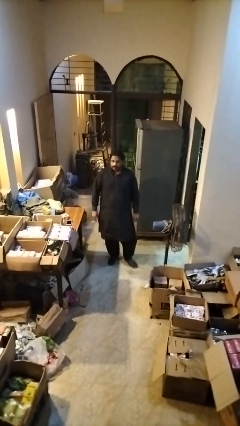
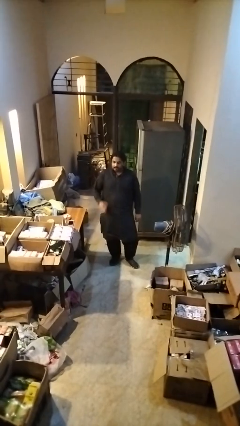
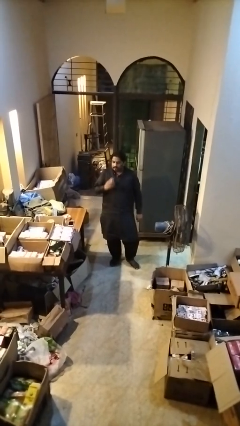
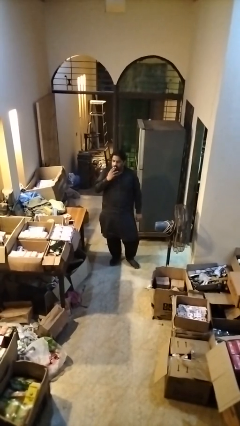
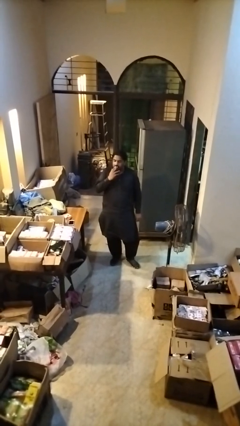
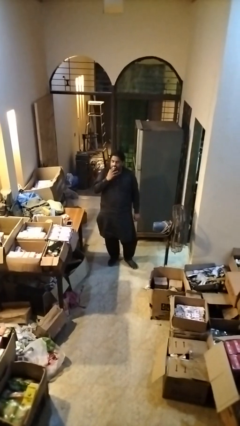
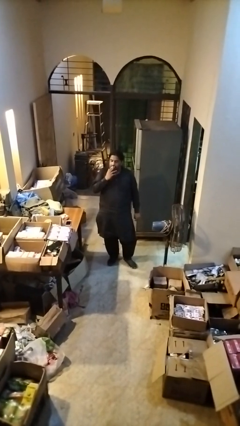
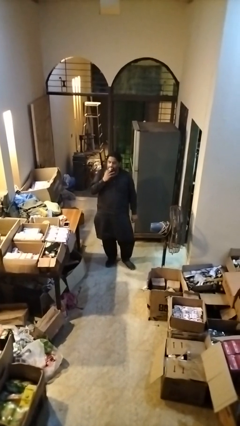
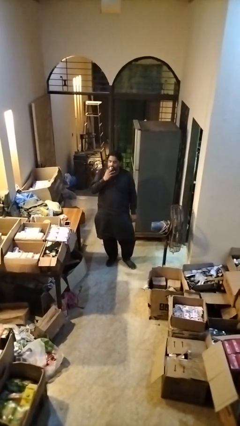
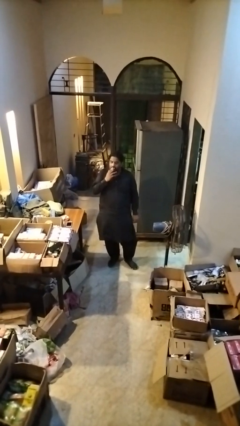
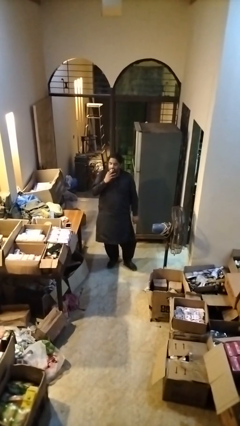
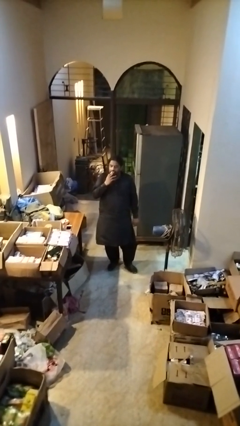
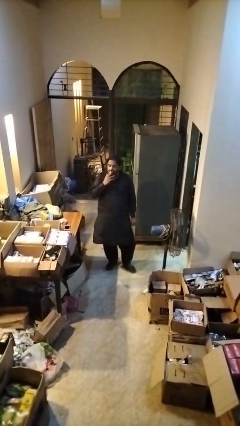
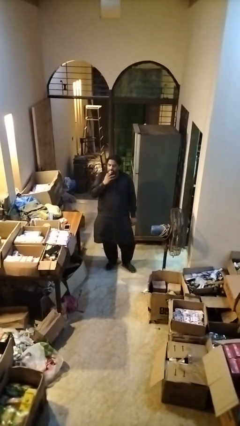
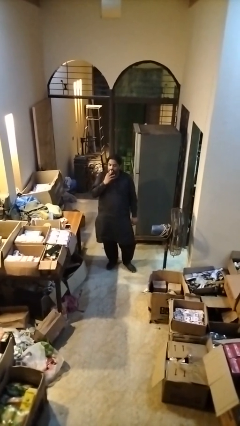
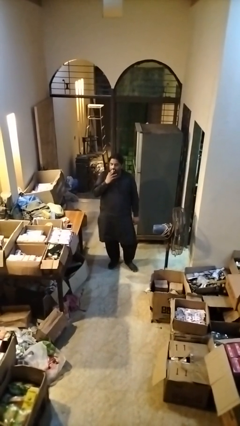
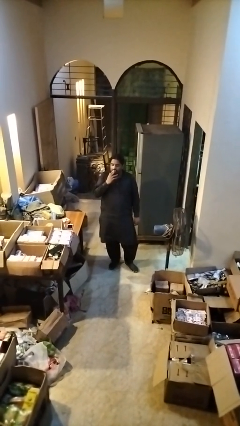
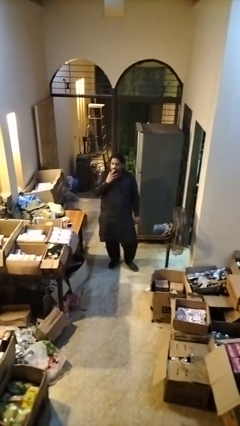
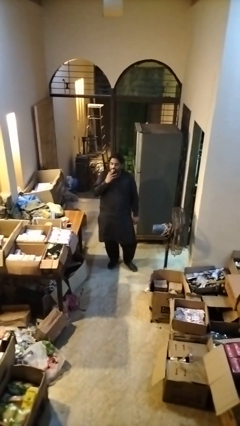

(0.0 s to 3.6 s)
person vapes

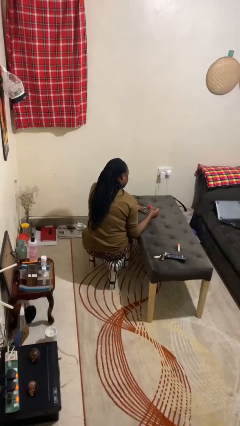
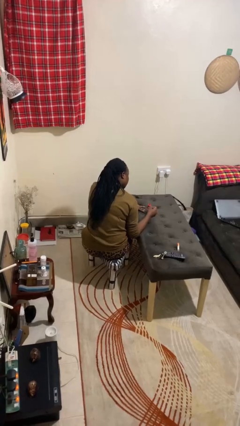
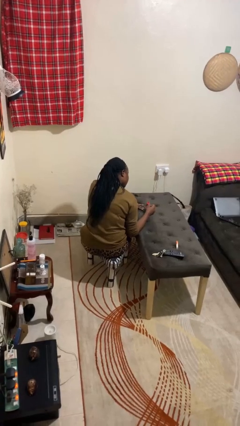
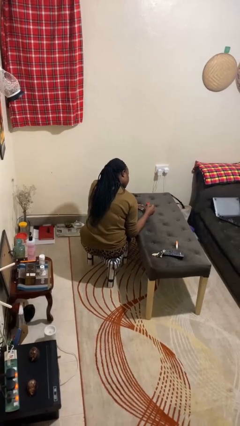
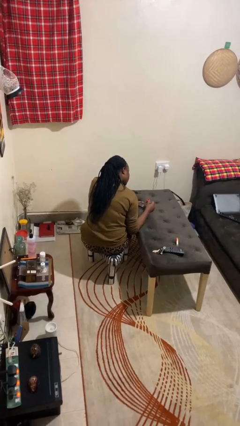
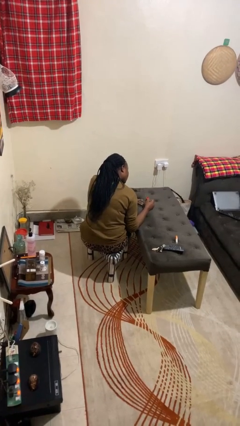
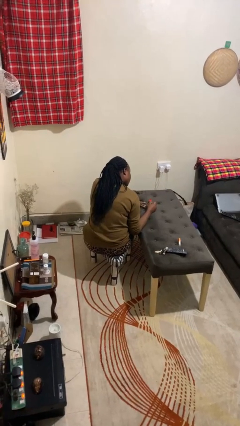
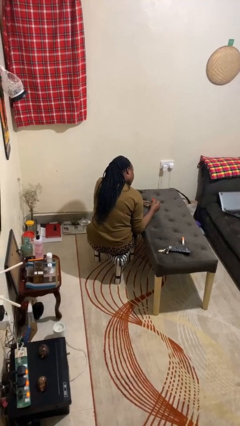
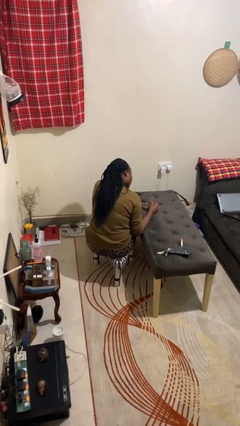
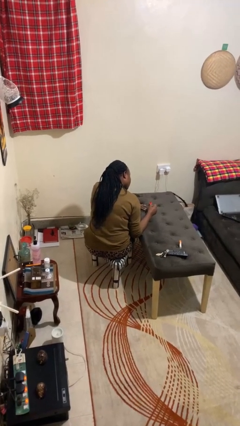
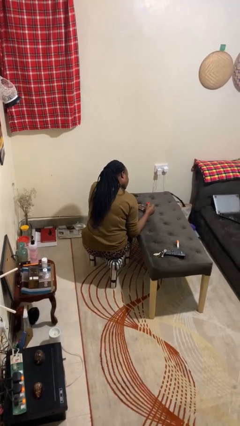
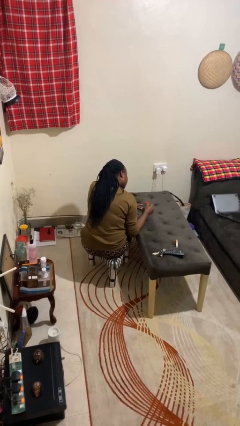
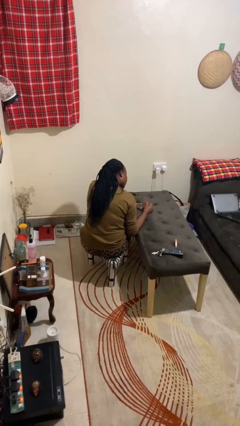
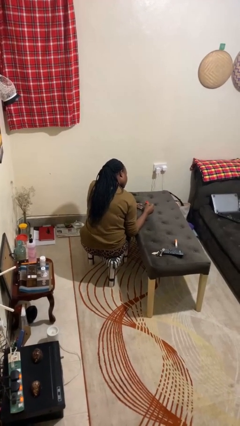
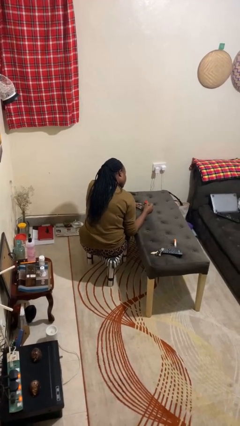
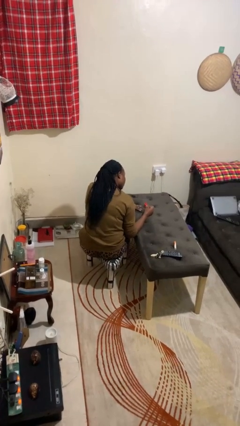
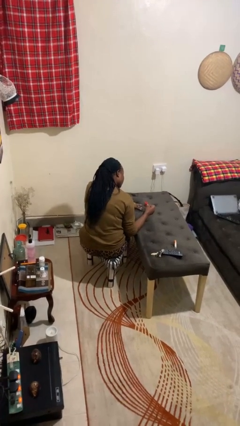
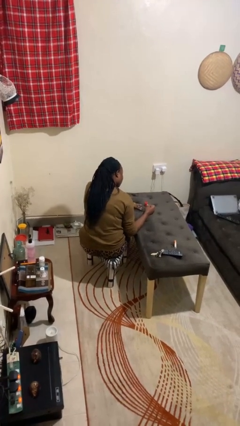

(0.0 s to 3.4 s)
person paints fingernails

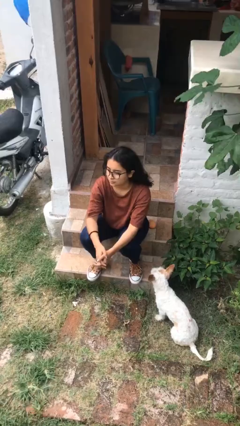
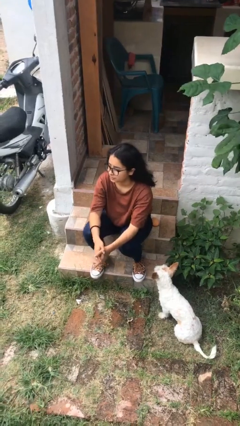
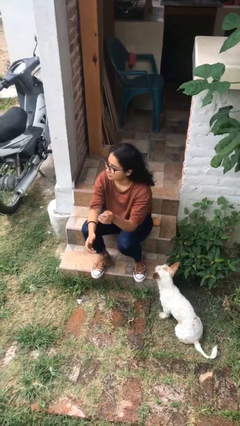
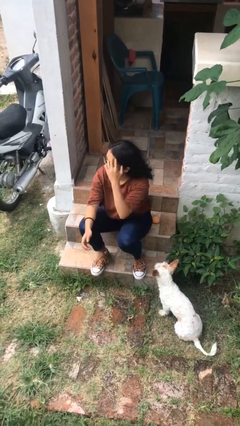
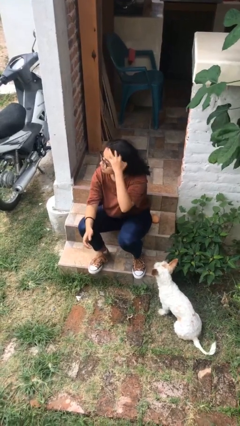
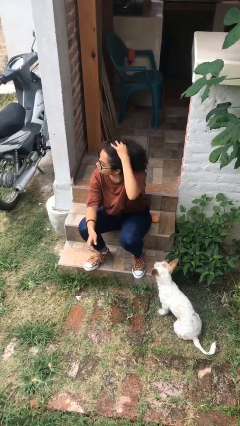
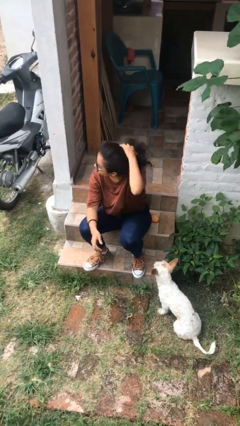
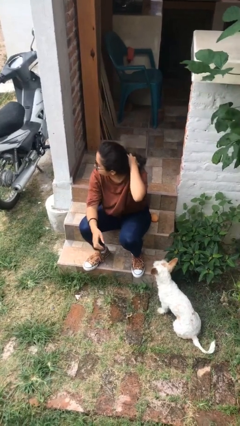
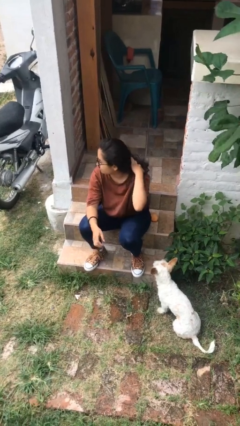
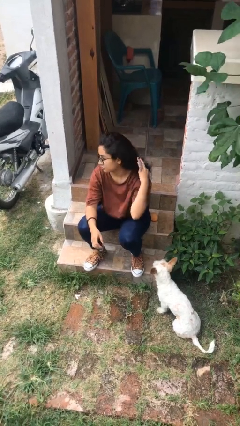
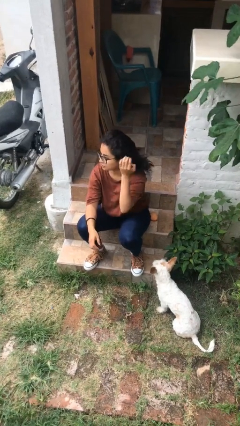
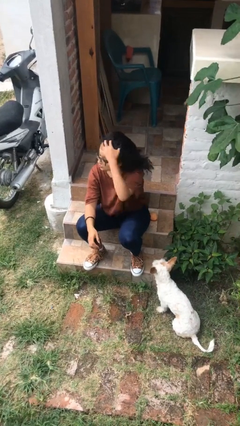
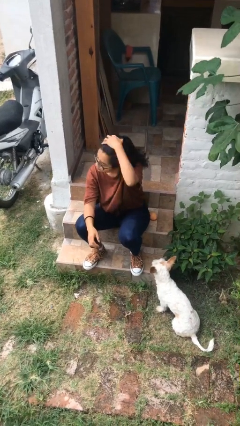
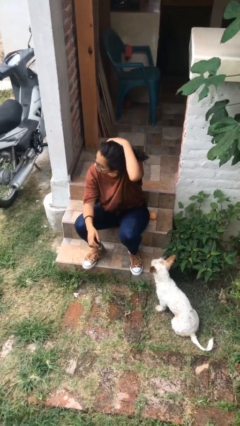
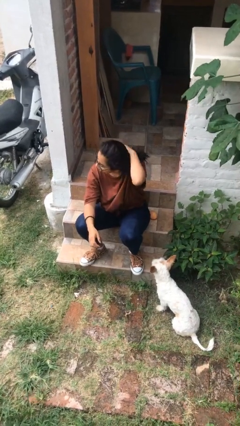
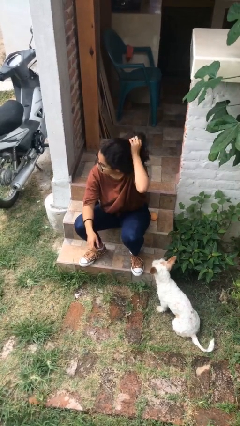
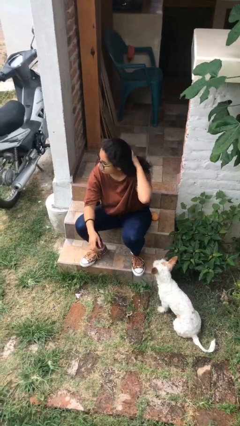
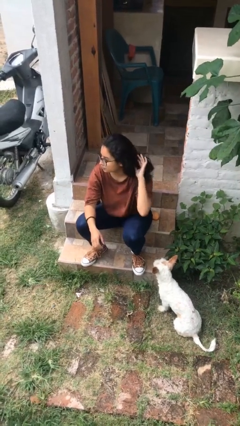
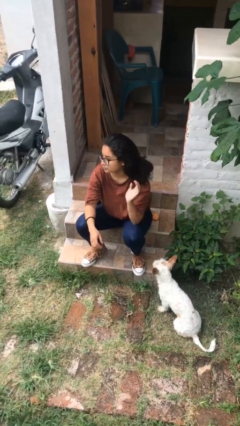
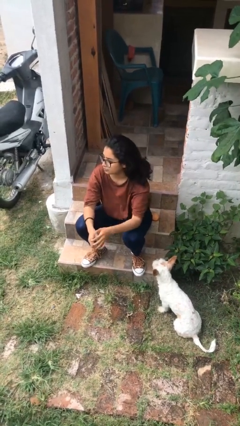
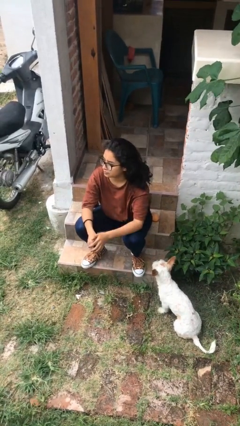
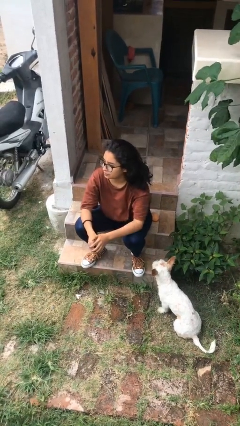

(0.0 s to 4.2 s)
person strokes hair

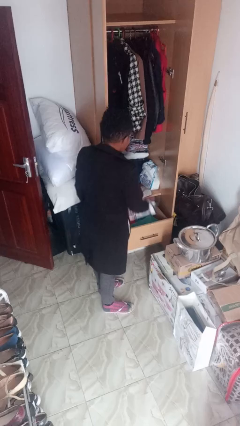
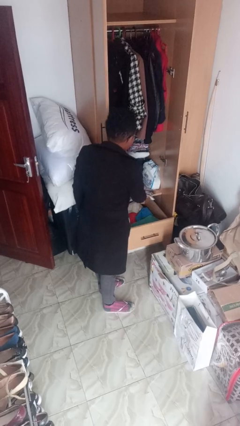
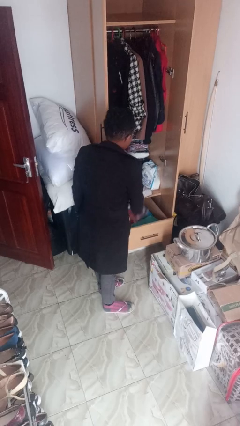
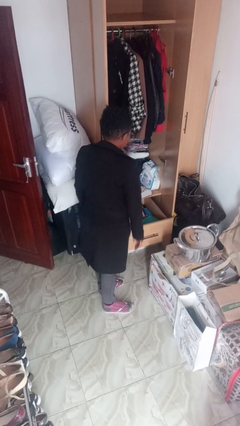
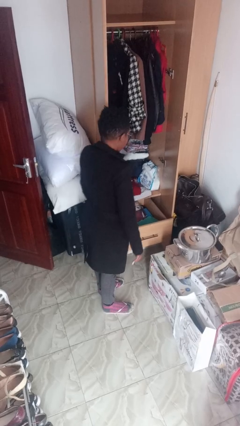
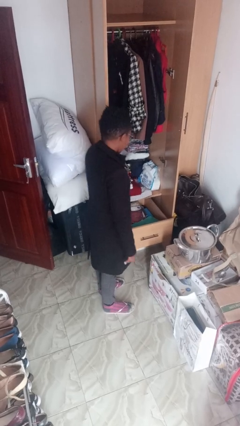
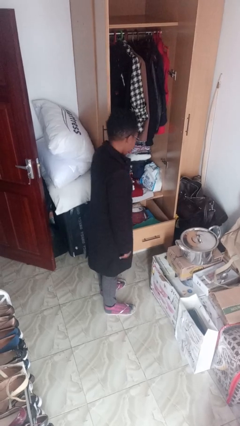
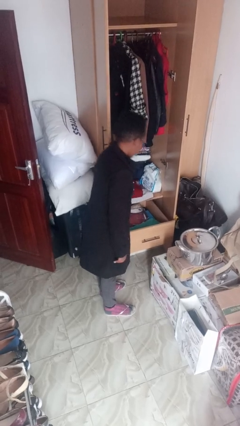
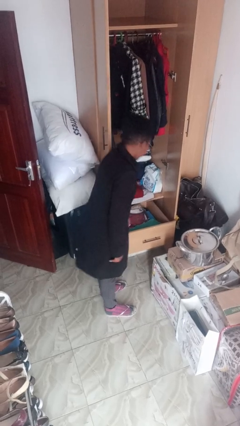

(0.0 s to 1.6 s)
person puts clothes into dresser

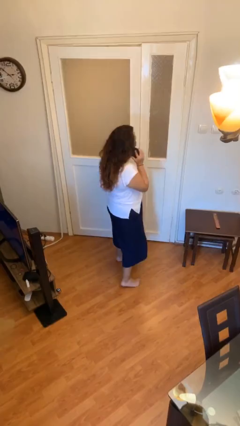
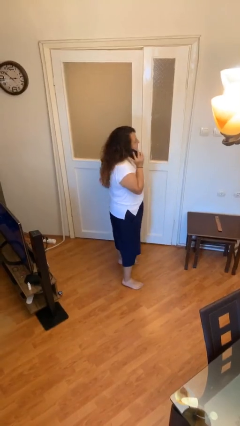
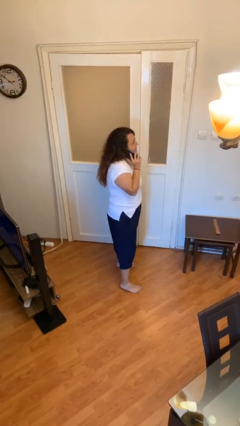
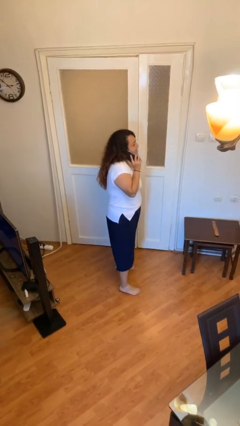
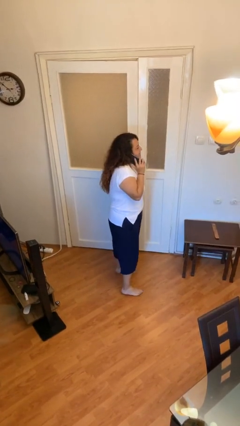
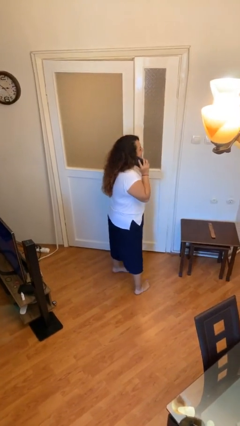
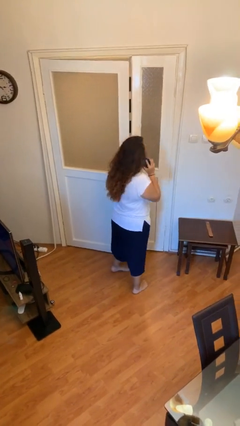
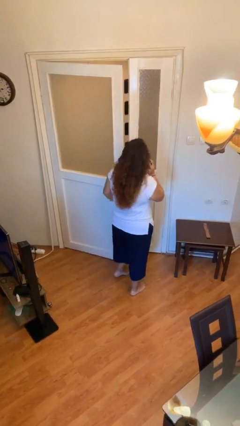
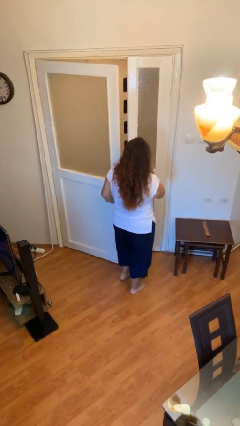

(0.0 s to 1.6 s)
person opens facility door

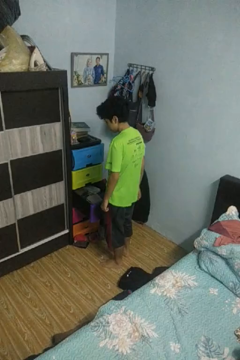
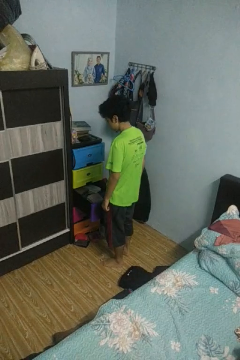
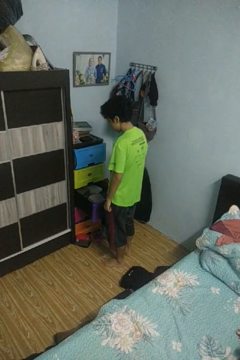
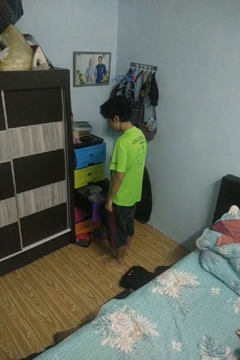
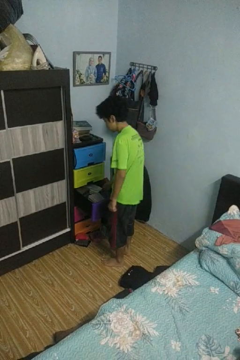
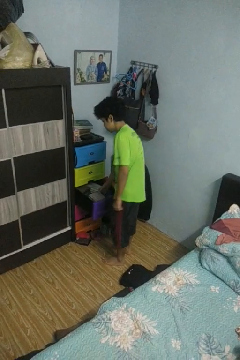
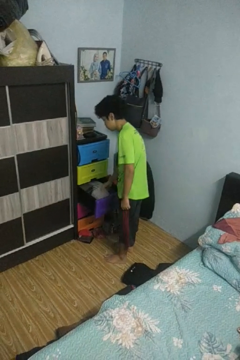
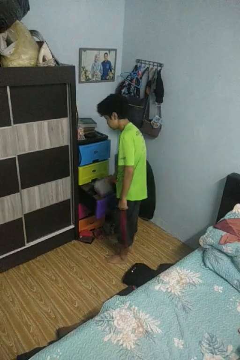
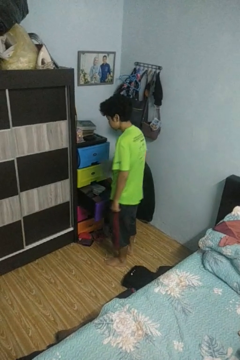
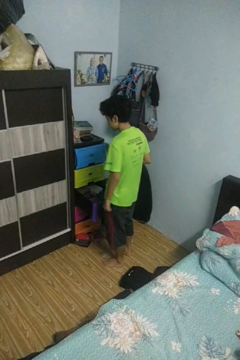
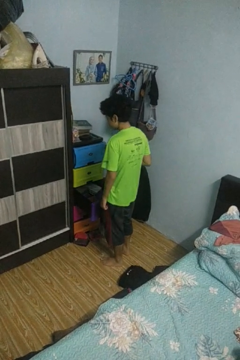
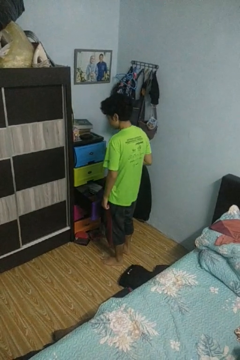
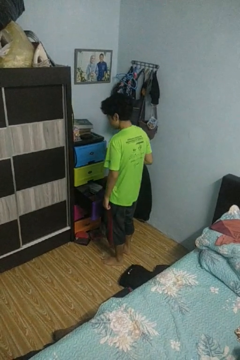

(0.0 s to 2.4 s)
person takes clothes from dresser

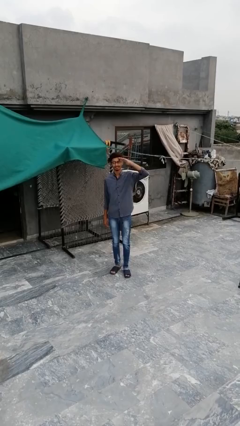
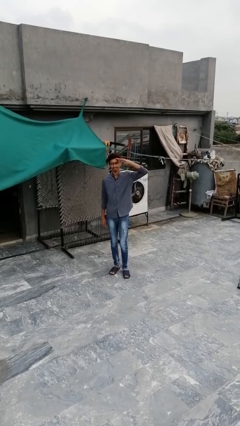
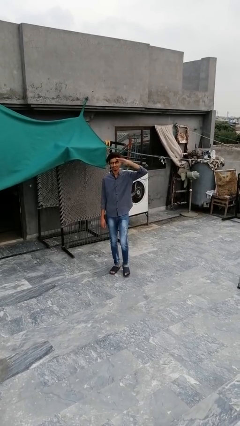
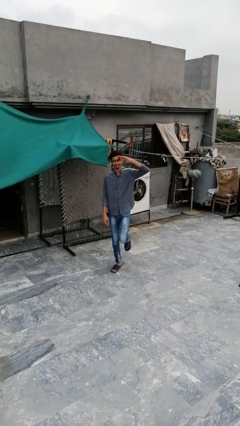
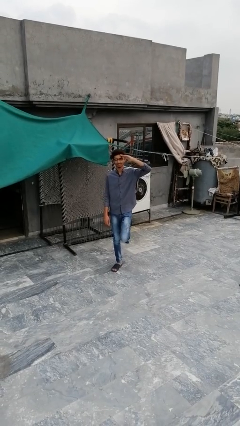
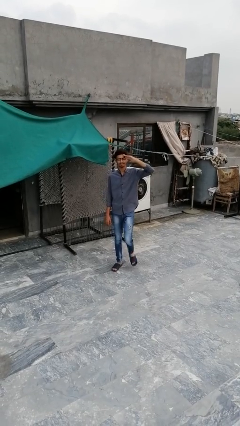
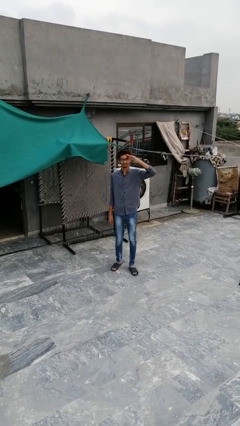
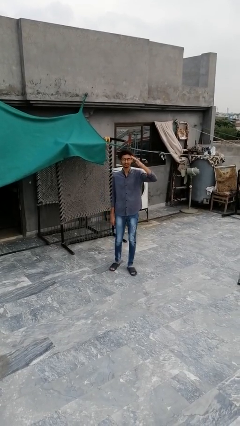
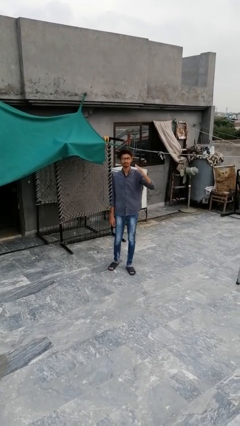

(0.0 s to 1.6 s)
person salutes
